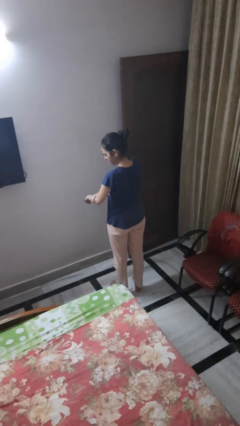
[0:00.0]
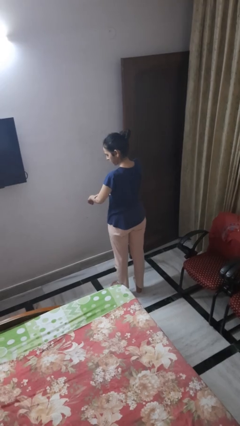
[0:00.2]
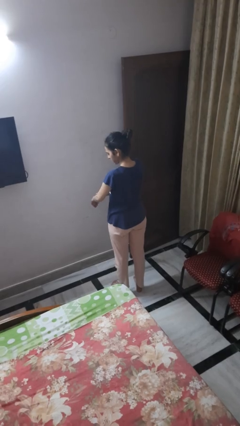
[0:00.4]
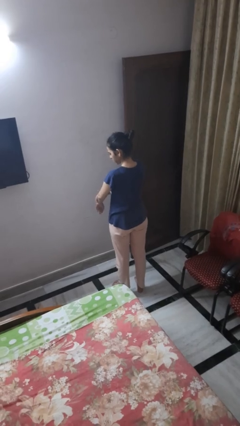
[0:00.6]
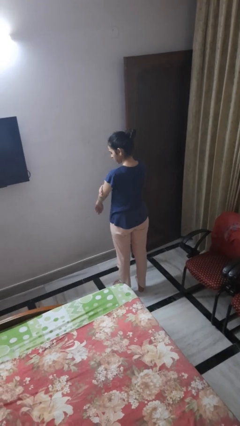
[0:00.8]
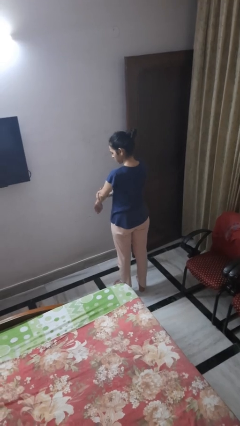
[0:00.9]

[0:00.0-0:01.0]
person swats bug

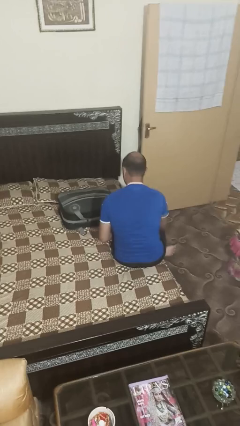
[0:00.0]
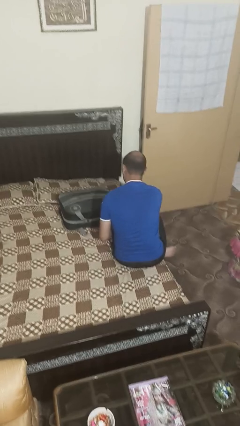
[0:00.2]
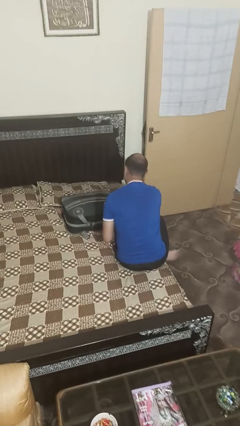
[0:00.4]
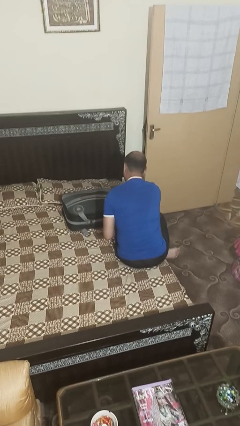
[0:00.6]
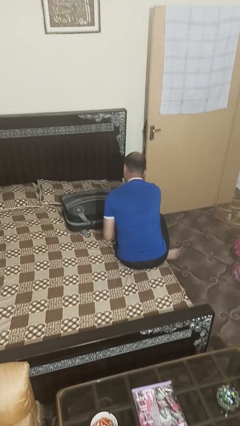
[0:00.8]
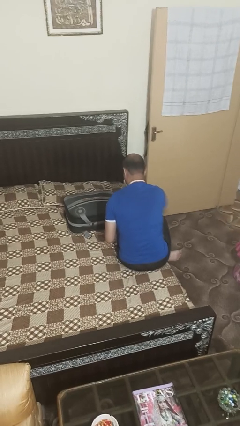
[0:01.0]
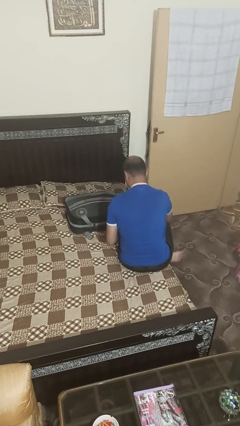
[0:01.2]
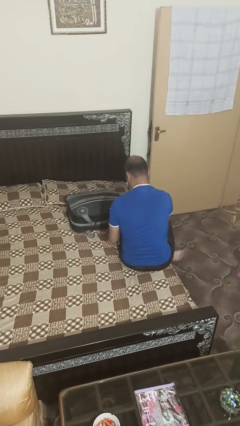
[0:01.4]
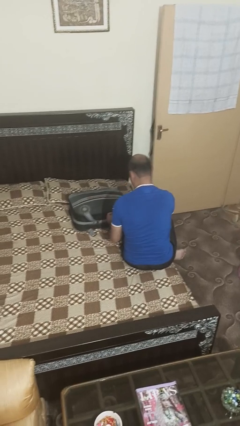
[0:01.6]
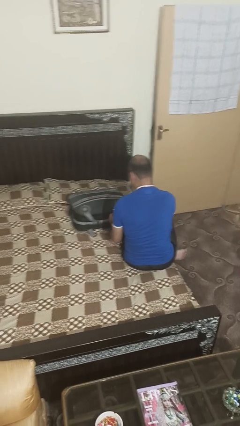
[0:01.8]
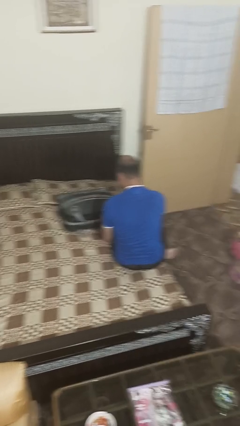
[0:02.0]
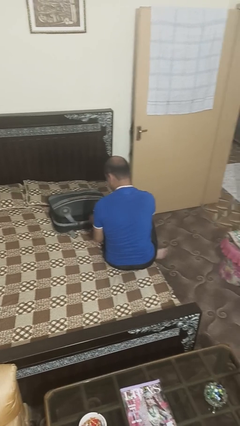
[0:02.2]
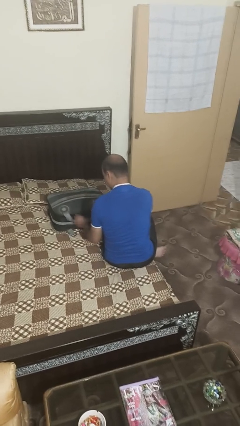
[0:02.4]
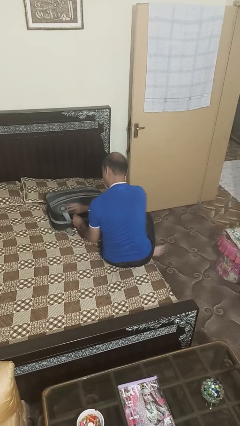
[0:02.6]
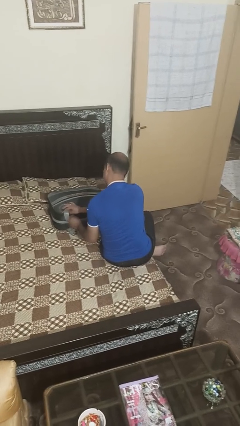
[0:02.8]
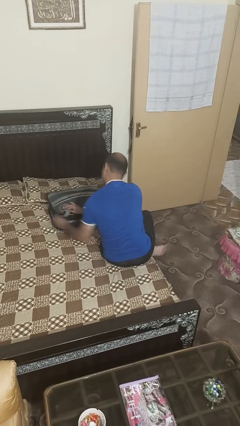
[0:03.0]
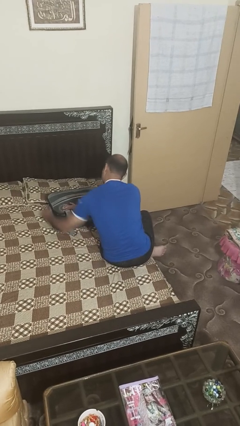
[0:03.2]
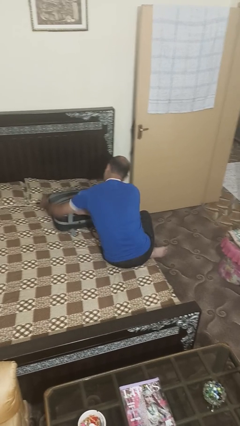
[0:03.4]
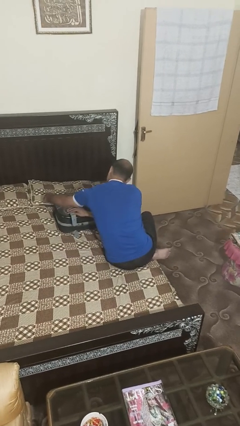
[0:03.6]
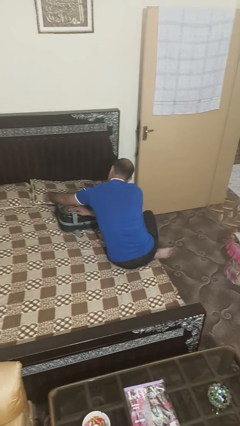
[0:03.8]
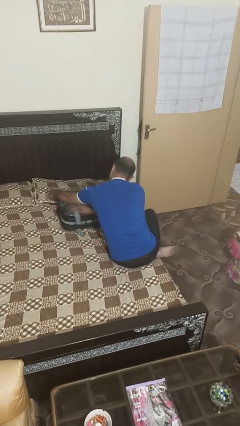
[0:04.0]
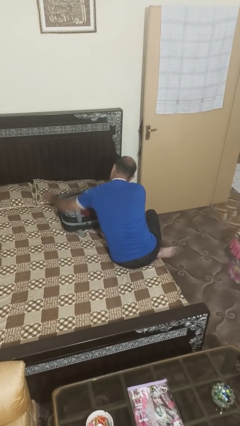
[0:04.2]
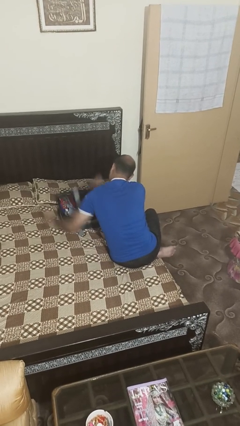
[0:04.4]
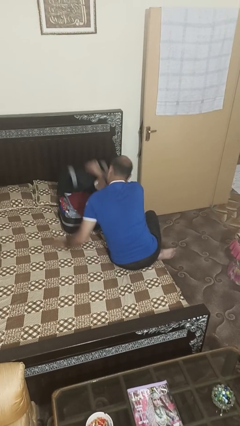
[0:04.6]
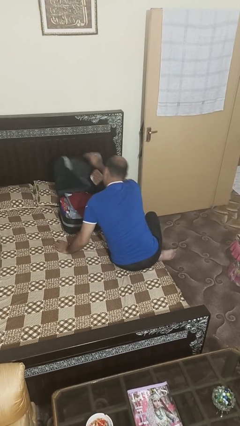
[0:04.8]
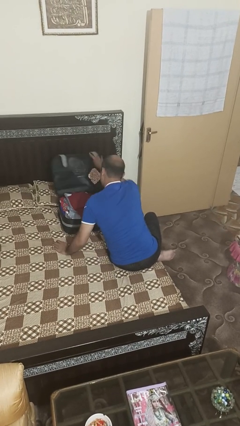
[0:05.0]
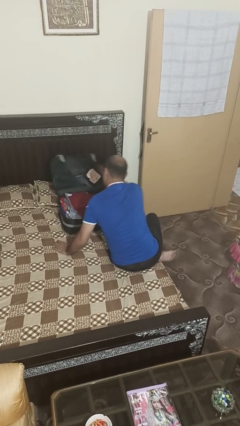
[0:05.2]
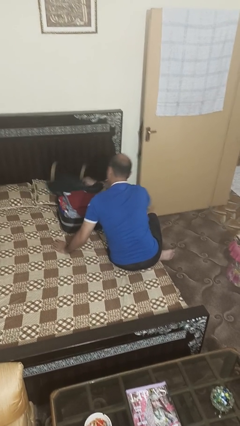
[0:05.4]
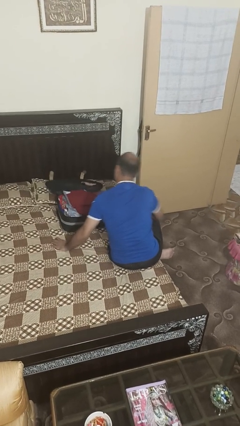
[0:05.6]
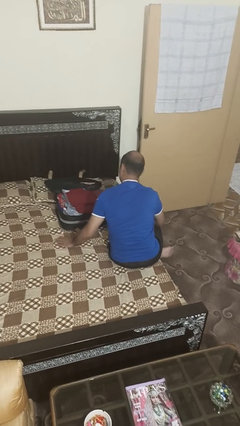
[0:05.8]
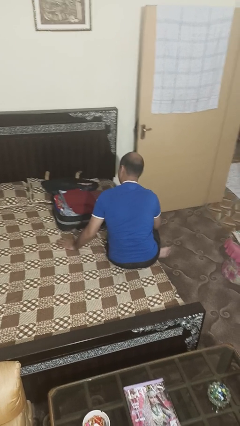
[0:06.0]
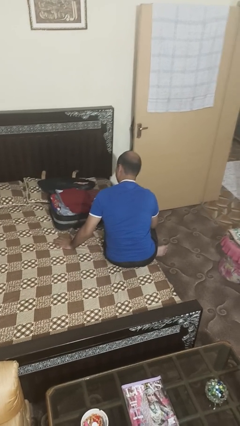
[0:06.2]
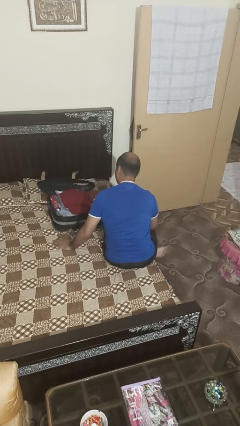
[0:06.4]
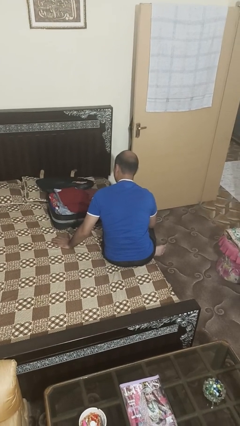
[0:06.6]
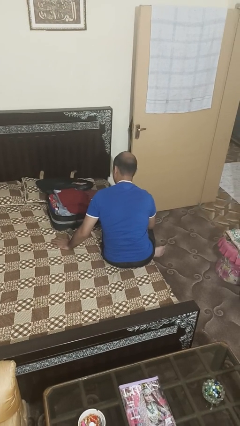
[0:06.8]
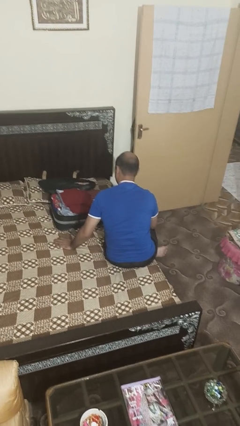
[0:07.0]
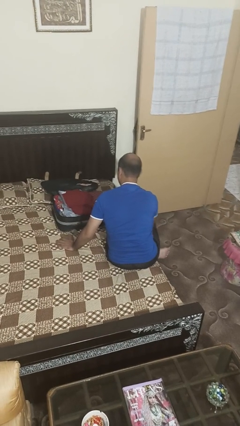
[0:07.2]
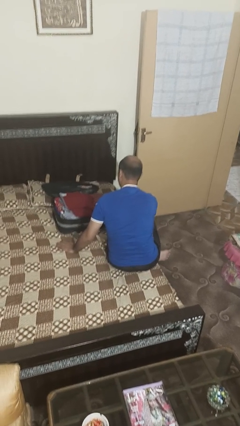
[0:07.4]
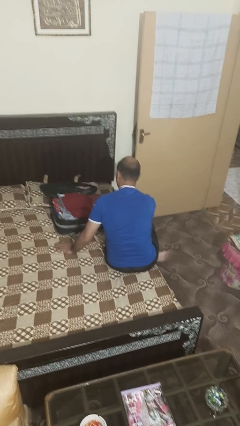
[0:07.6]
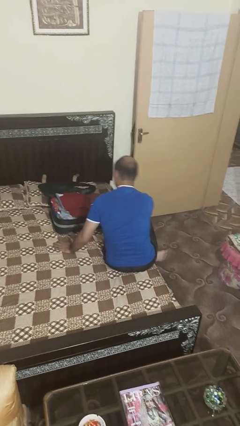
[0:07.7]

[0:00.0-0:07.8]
person opens suitcase

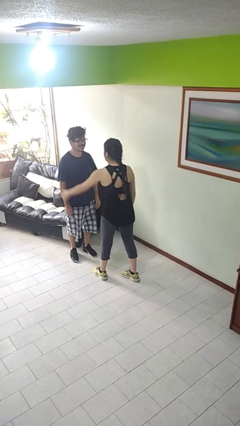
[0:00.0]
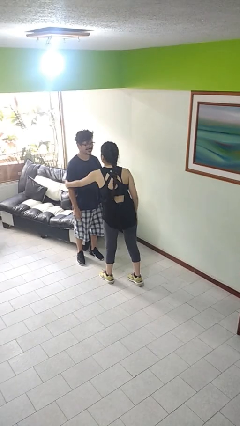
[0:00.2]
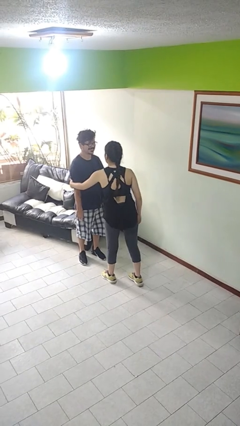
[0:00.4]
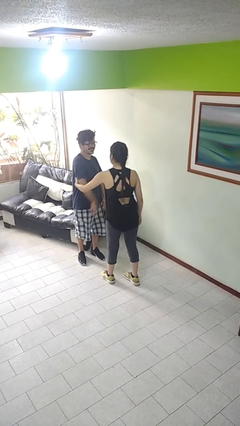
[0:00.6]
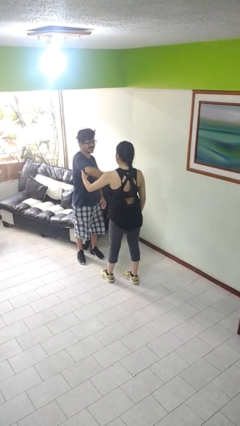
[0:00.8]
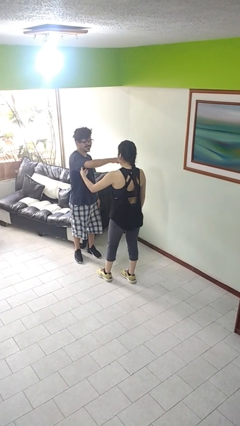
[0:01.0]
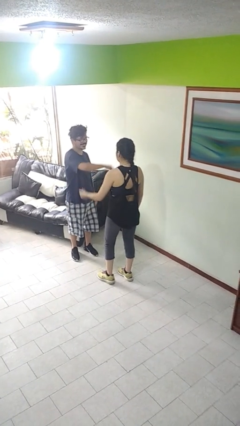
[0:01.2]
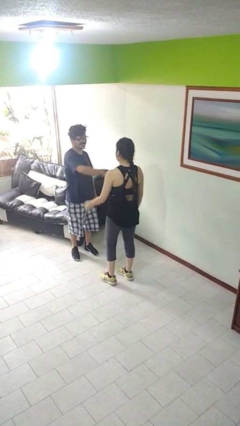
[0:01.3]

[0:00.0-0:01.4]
person grabs person by bicep

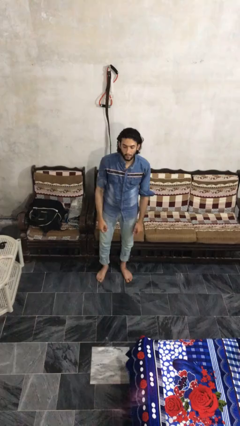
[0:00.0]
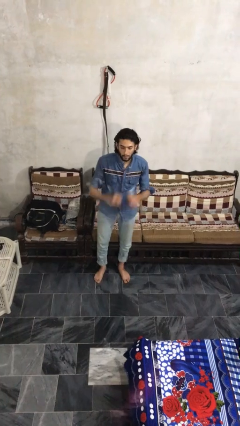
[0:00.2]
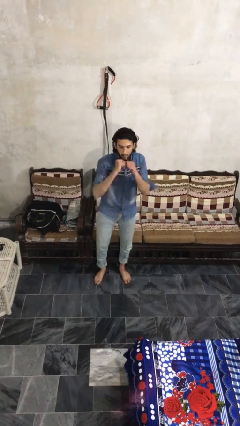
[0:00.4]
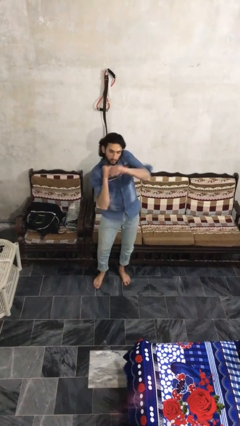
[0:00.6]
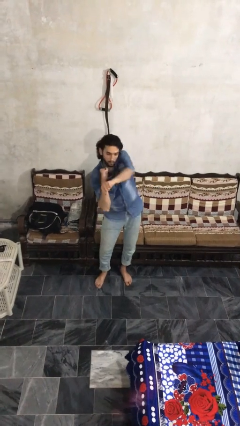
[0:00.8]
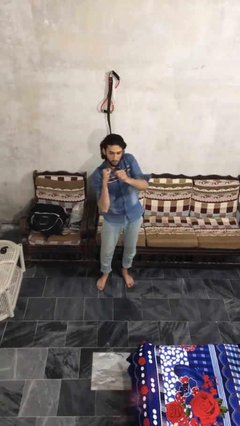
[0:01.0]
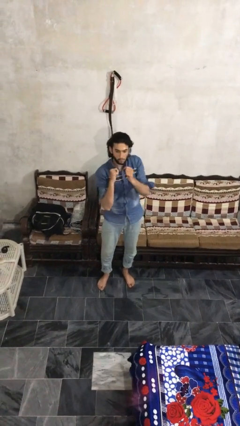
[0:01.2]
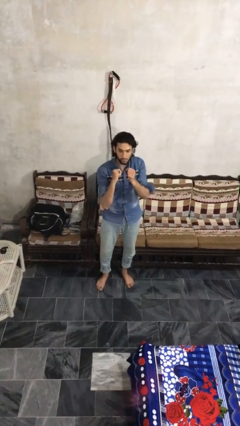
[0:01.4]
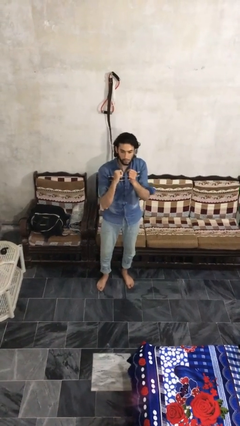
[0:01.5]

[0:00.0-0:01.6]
person punches

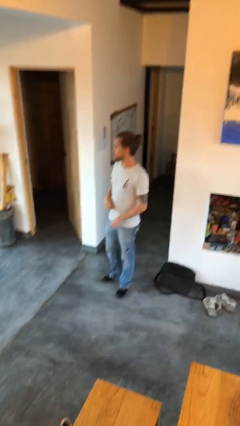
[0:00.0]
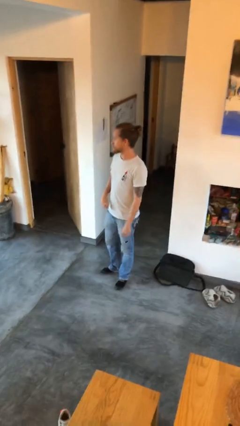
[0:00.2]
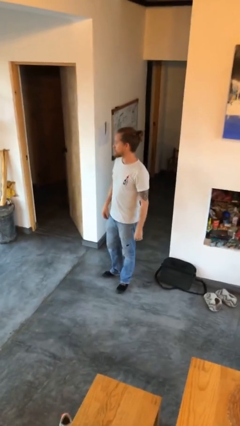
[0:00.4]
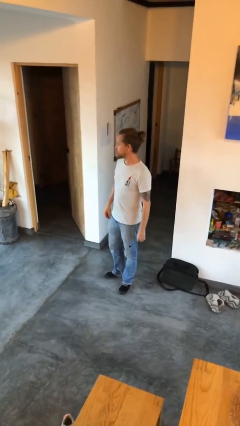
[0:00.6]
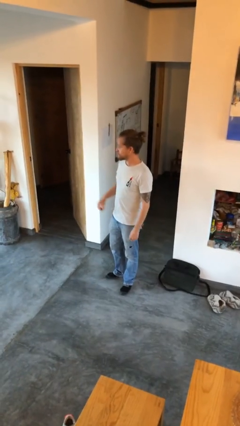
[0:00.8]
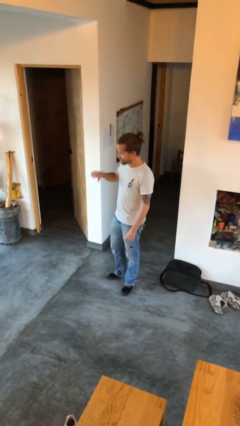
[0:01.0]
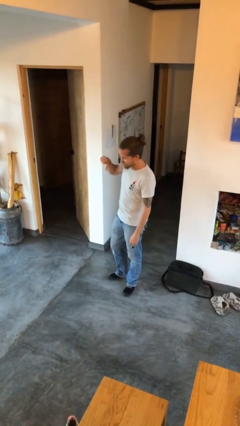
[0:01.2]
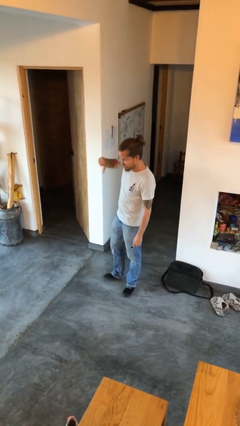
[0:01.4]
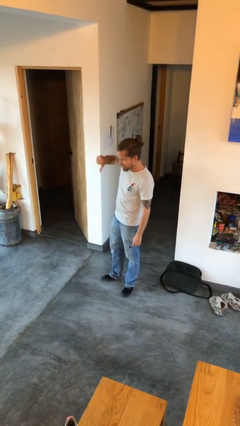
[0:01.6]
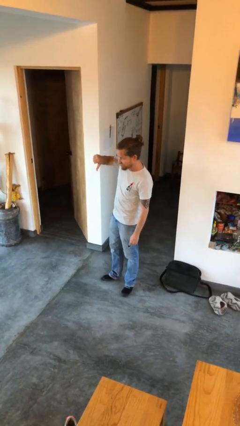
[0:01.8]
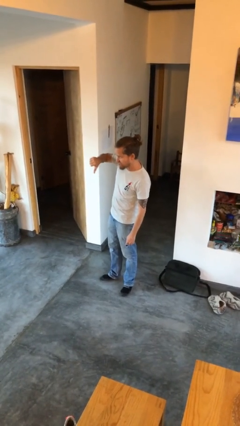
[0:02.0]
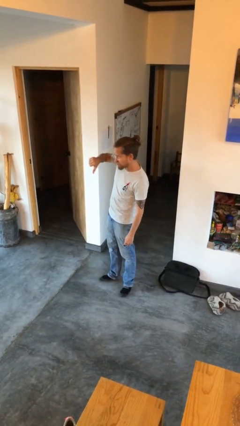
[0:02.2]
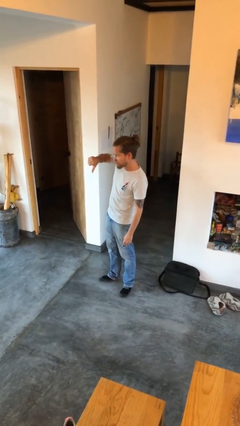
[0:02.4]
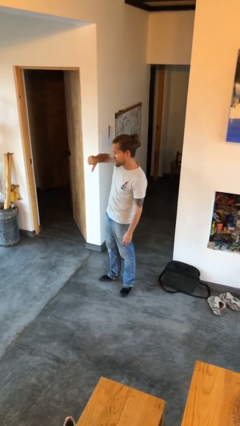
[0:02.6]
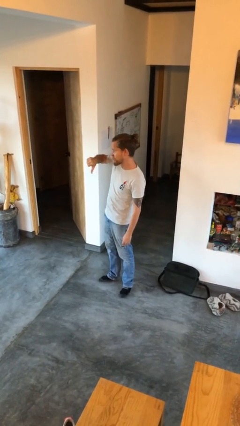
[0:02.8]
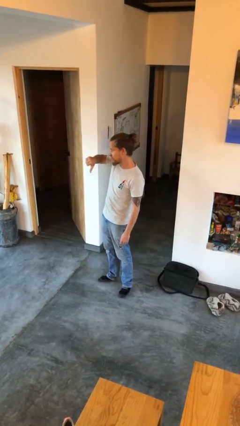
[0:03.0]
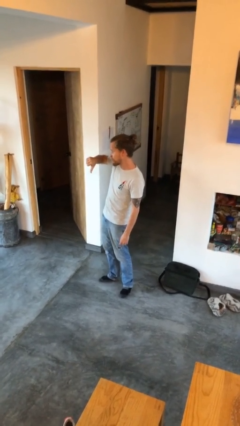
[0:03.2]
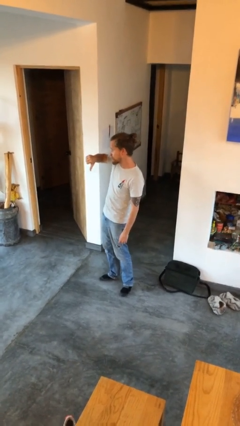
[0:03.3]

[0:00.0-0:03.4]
person gestures thumbs down

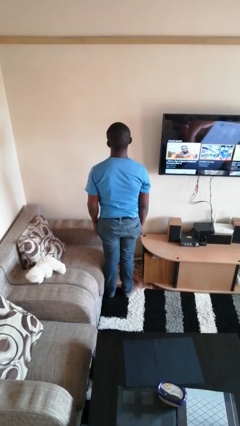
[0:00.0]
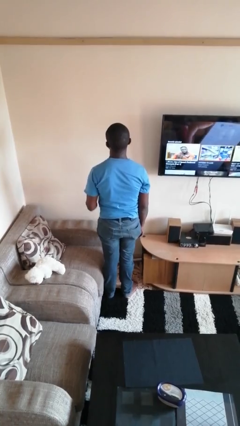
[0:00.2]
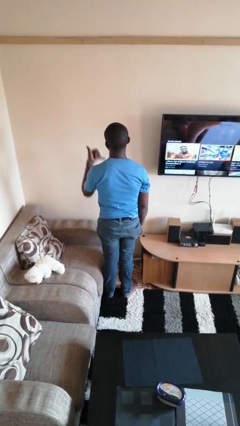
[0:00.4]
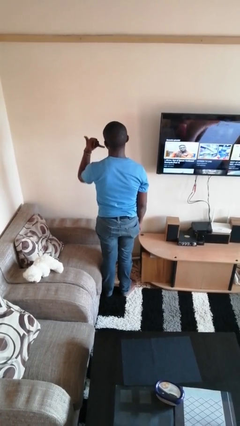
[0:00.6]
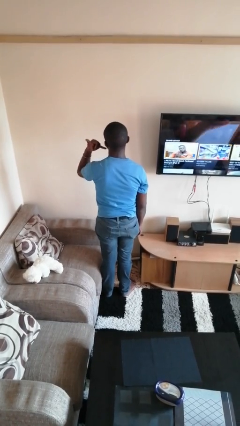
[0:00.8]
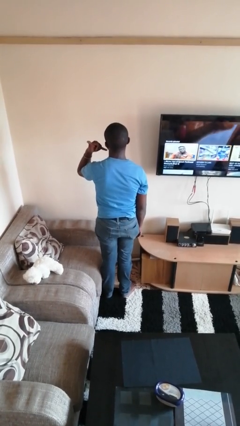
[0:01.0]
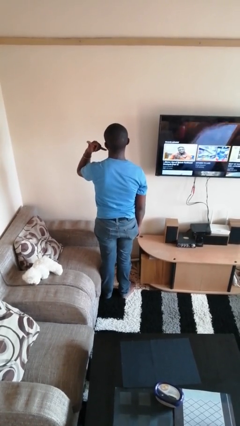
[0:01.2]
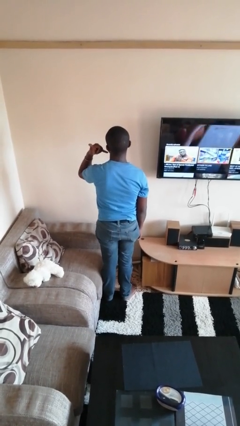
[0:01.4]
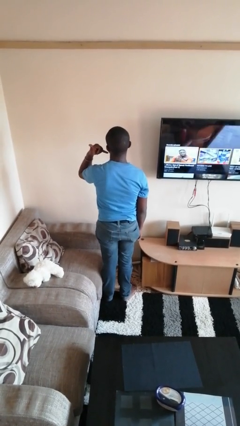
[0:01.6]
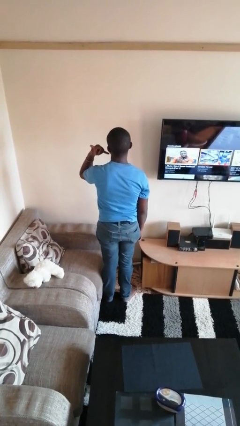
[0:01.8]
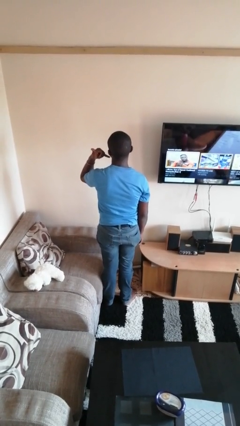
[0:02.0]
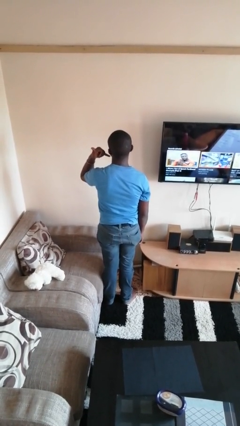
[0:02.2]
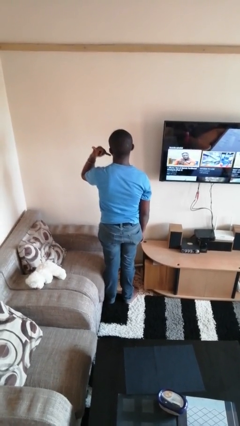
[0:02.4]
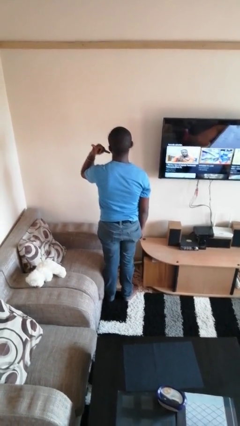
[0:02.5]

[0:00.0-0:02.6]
person gestures call me
